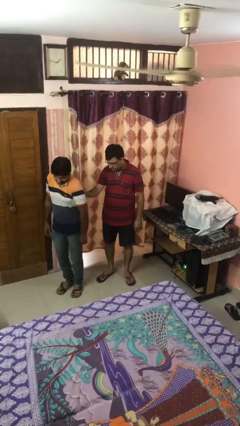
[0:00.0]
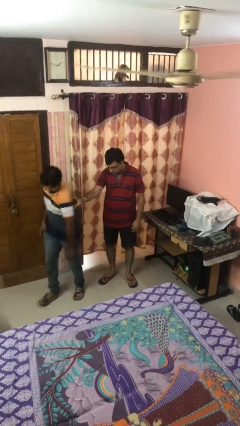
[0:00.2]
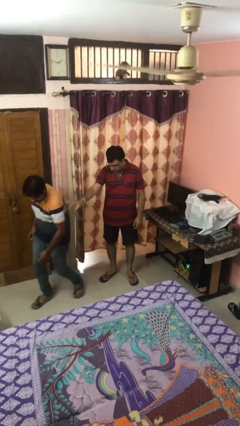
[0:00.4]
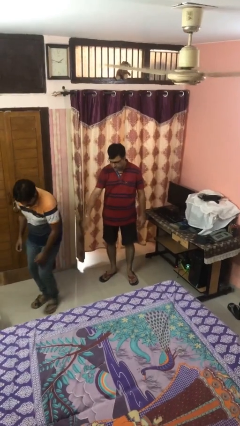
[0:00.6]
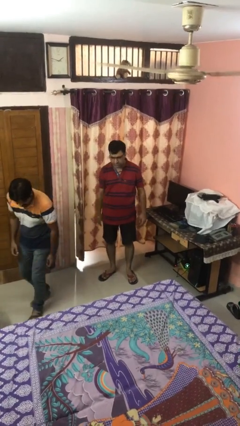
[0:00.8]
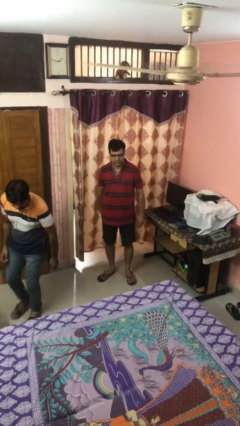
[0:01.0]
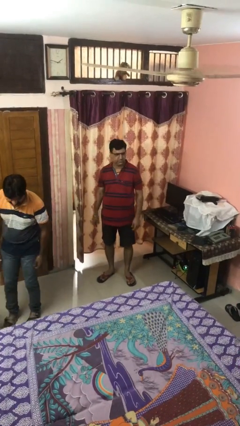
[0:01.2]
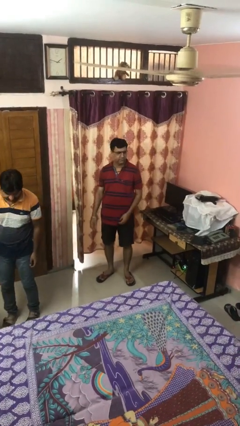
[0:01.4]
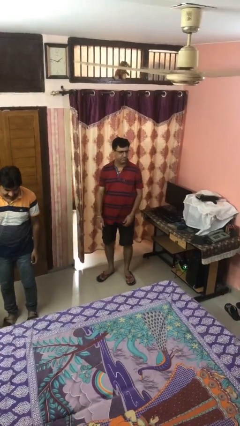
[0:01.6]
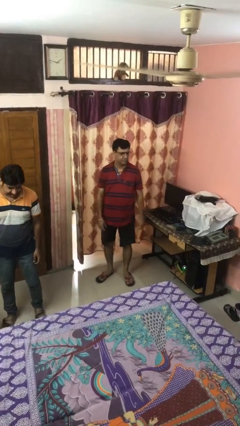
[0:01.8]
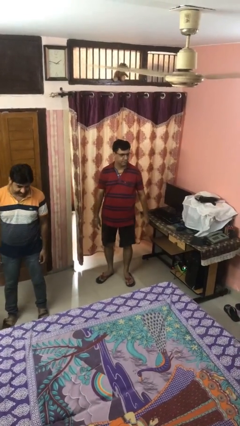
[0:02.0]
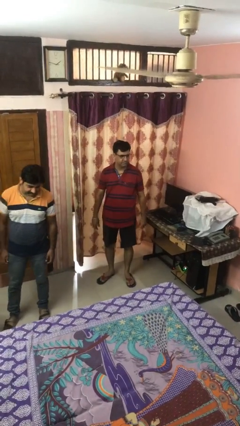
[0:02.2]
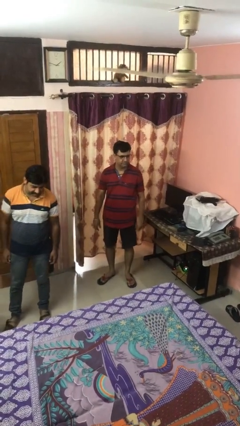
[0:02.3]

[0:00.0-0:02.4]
person shoves person

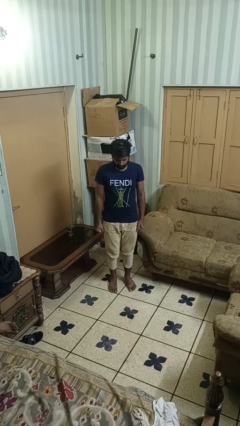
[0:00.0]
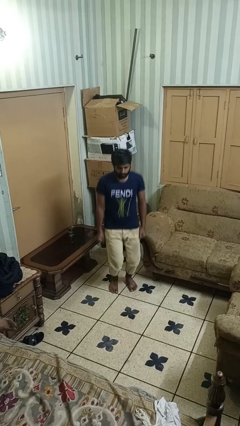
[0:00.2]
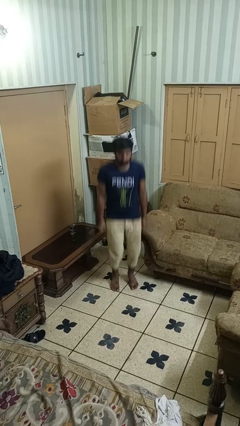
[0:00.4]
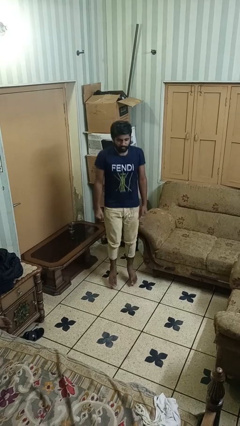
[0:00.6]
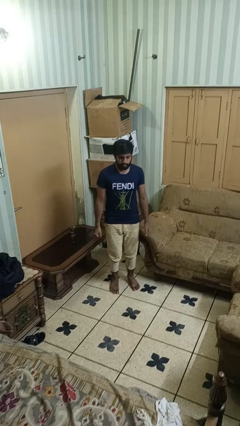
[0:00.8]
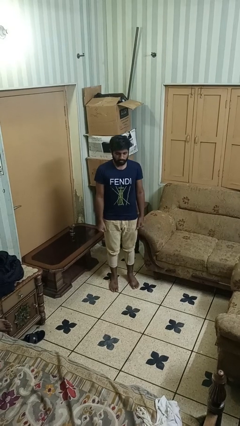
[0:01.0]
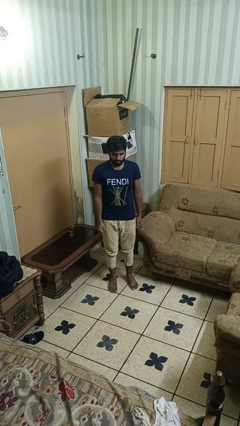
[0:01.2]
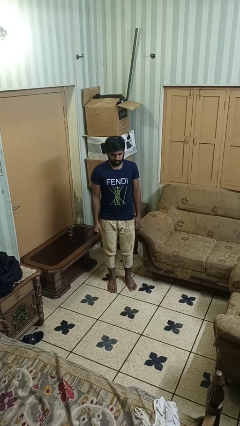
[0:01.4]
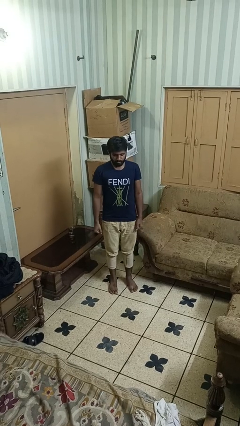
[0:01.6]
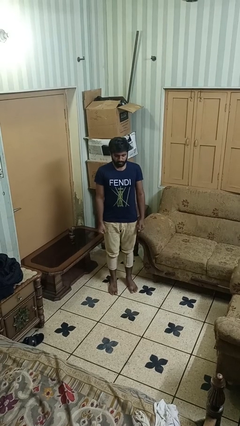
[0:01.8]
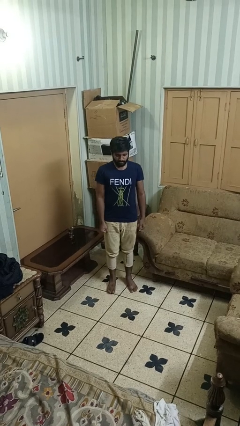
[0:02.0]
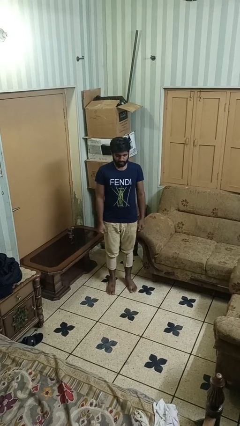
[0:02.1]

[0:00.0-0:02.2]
person jumps

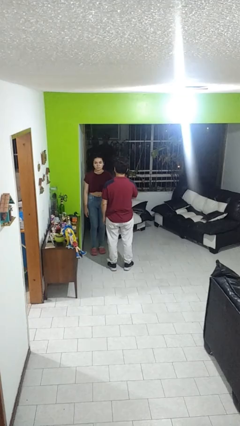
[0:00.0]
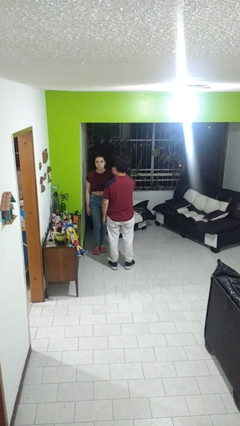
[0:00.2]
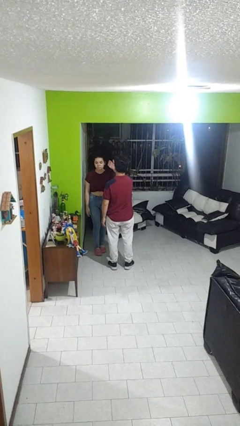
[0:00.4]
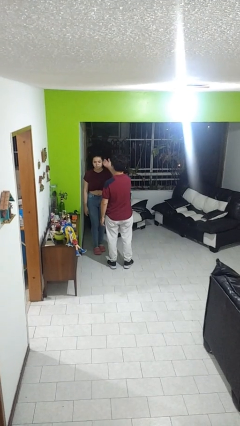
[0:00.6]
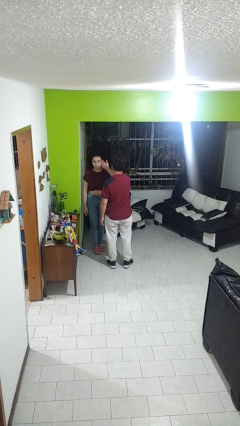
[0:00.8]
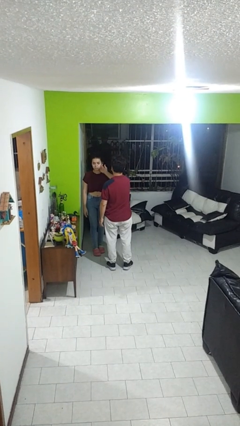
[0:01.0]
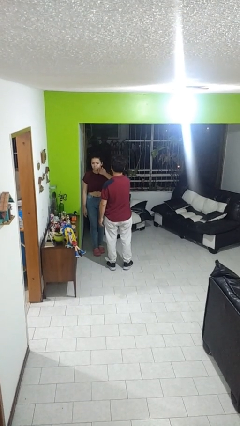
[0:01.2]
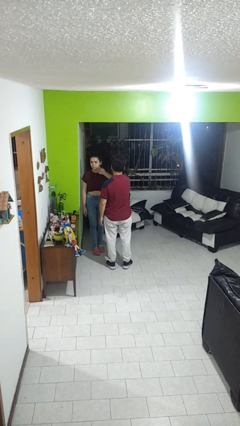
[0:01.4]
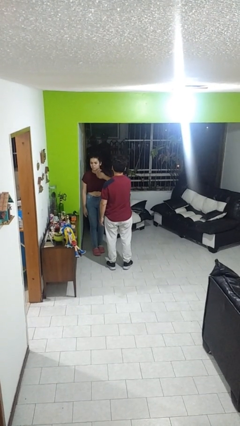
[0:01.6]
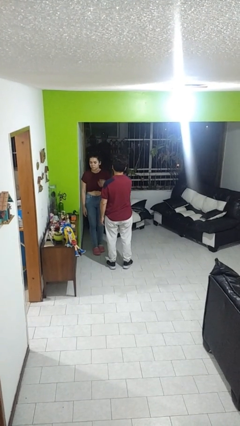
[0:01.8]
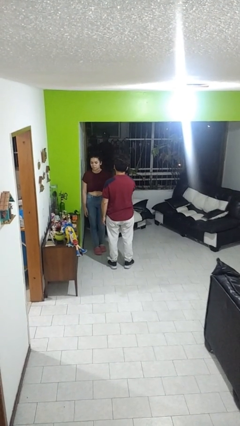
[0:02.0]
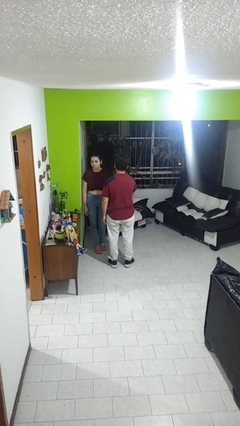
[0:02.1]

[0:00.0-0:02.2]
person touches face of person

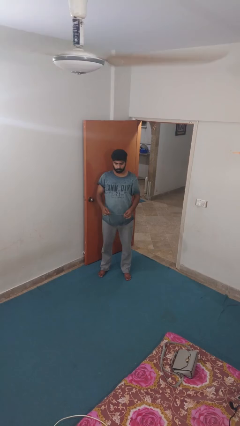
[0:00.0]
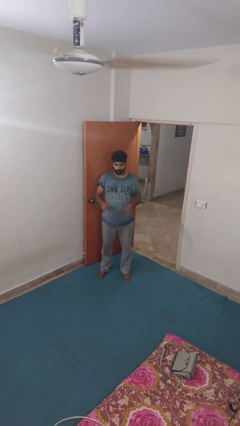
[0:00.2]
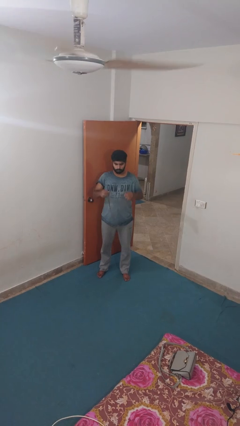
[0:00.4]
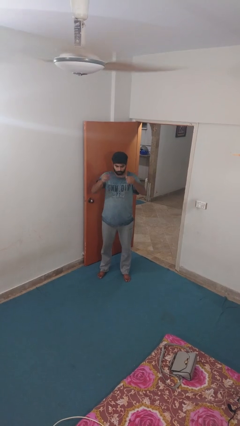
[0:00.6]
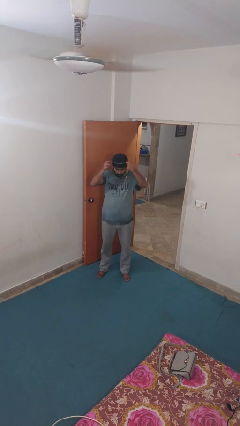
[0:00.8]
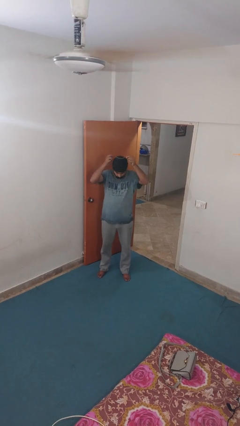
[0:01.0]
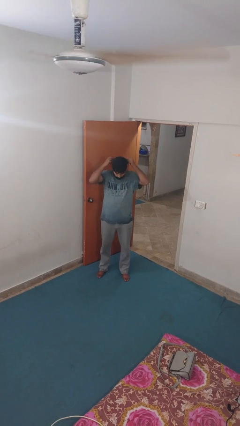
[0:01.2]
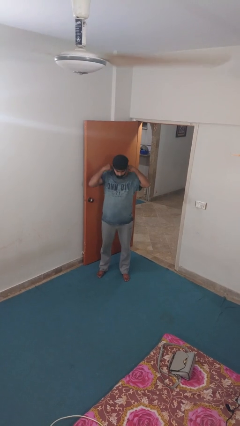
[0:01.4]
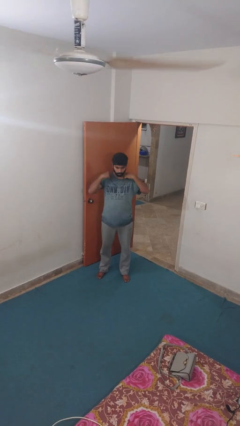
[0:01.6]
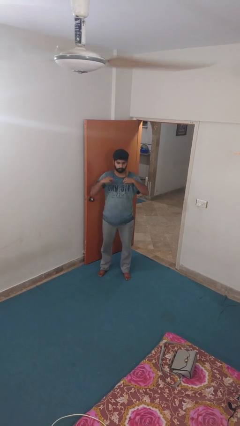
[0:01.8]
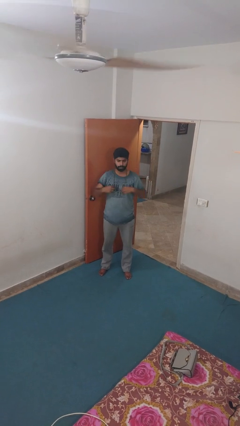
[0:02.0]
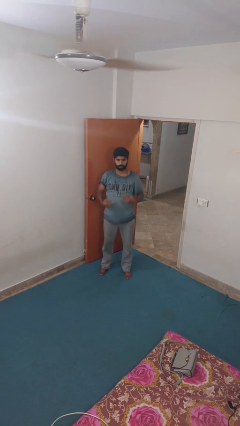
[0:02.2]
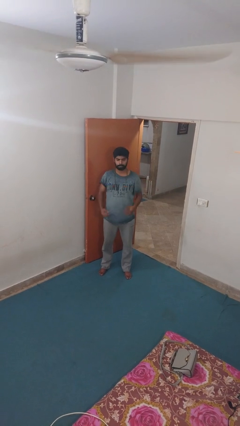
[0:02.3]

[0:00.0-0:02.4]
person puts on necklace

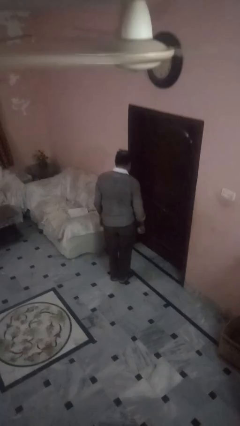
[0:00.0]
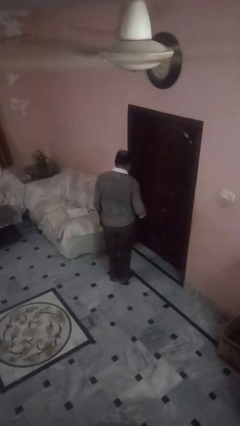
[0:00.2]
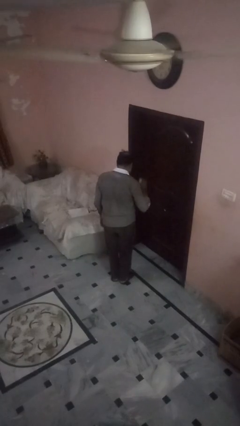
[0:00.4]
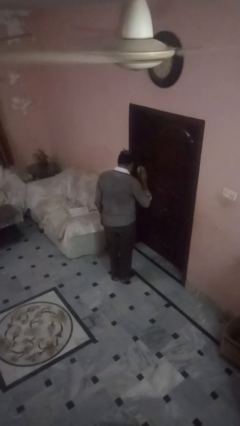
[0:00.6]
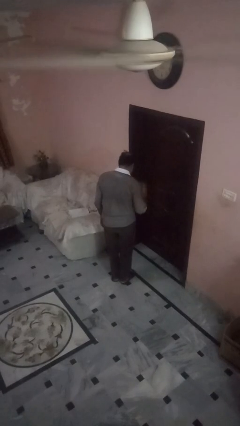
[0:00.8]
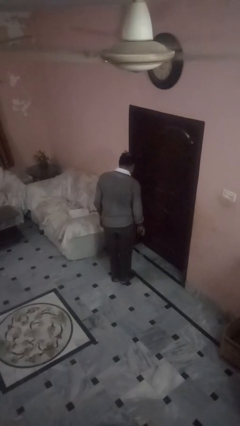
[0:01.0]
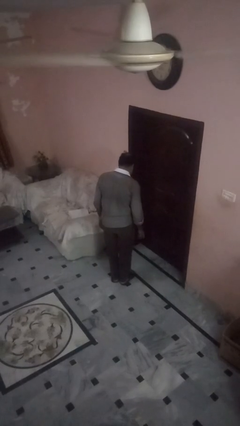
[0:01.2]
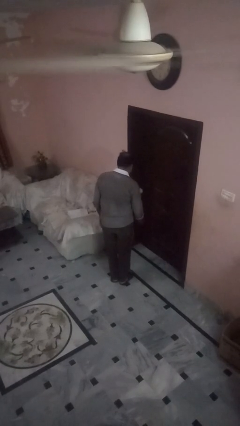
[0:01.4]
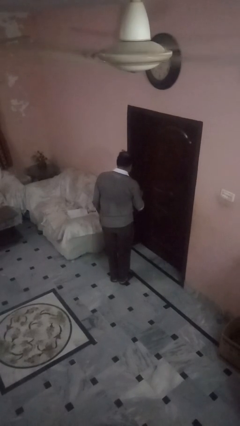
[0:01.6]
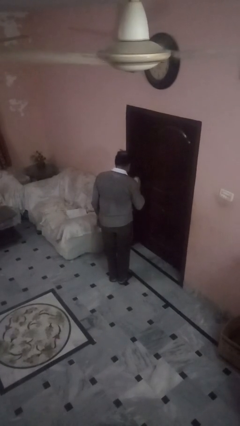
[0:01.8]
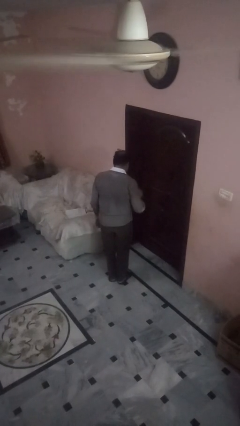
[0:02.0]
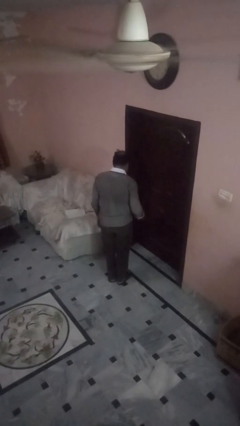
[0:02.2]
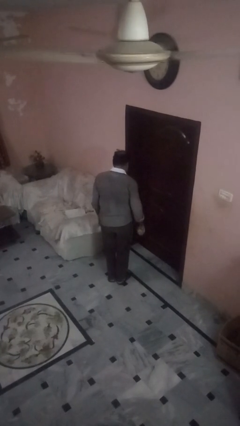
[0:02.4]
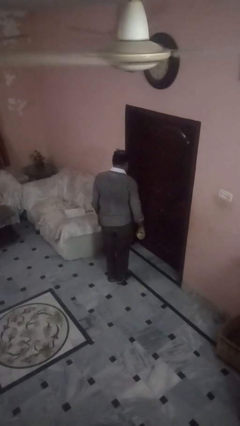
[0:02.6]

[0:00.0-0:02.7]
person bounces ball on floor

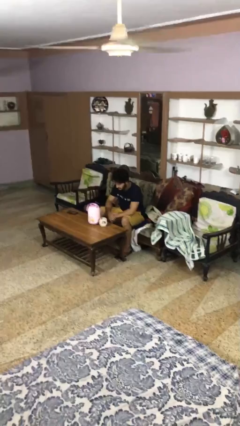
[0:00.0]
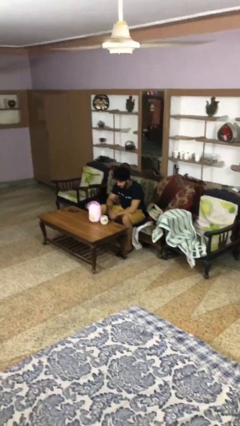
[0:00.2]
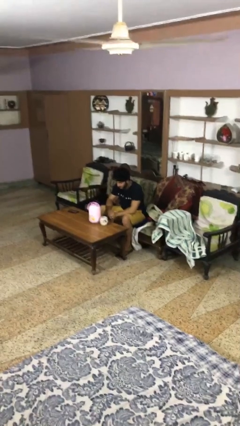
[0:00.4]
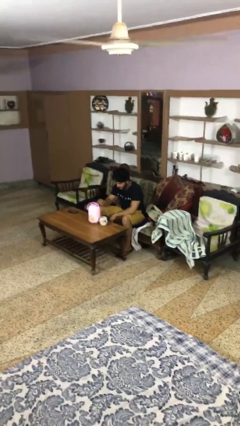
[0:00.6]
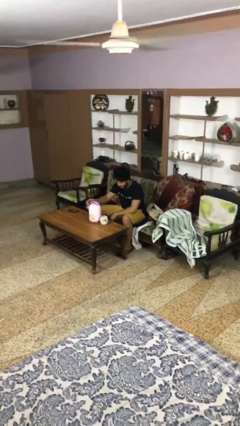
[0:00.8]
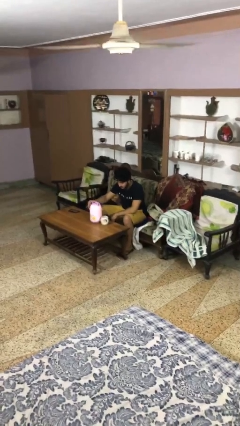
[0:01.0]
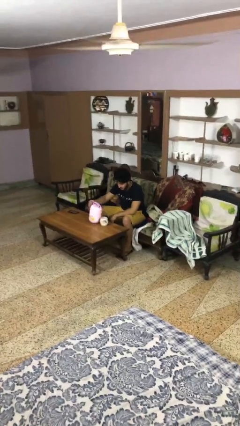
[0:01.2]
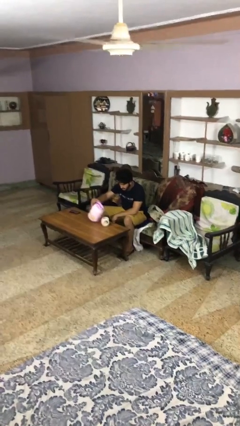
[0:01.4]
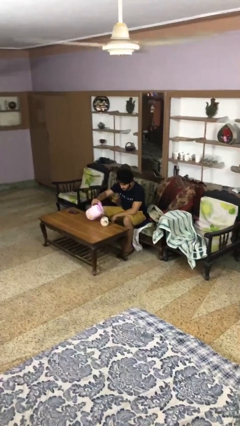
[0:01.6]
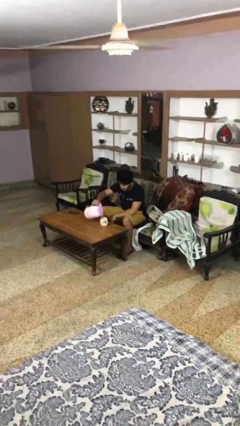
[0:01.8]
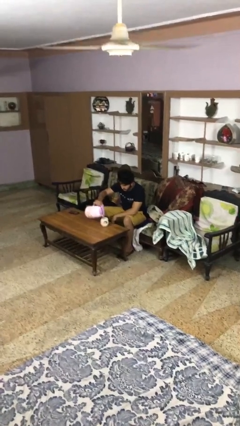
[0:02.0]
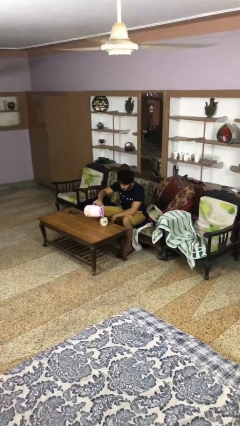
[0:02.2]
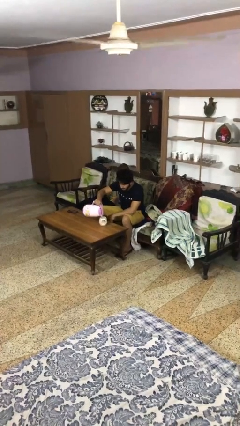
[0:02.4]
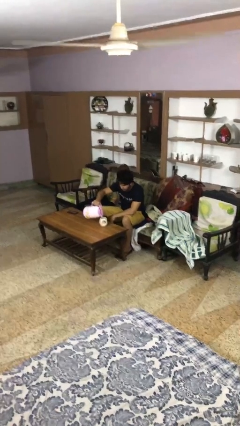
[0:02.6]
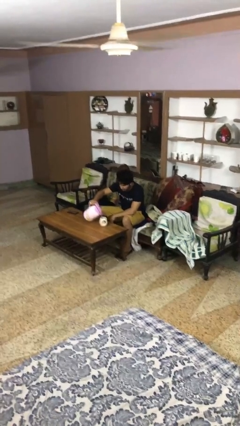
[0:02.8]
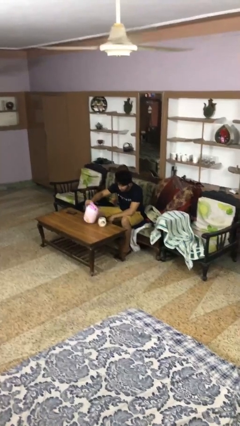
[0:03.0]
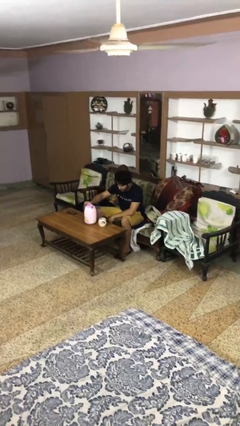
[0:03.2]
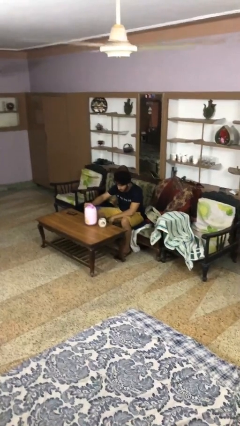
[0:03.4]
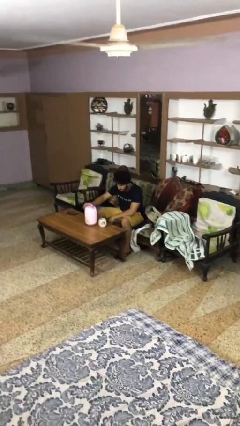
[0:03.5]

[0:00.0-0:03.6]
person pours coffee into mug

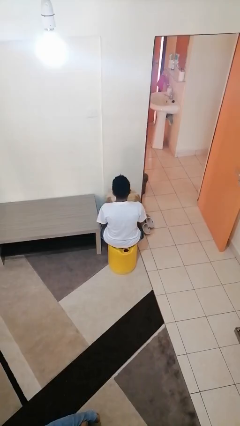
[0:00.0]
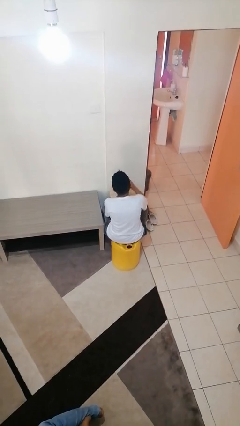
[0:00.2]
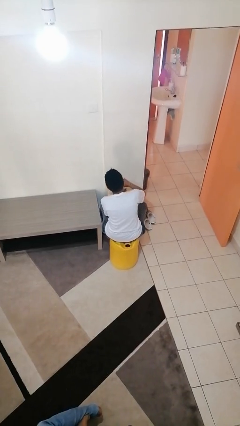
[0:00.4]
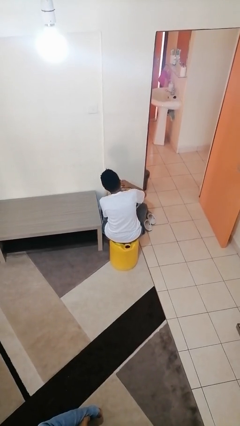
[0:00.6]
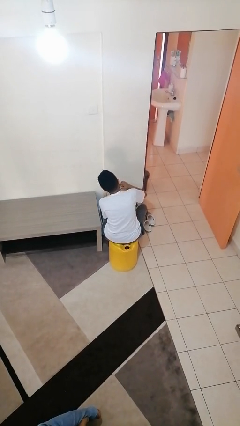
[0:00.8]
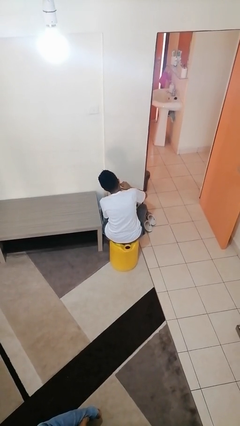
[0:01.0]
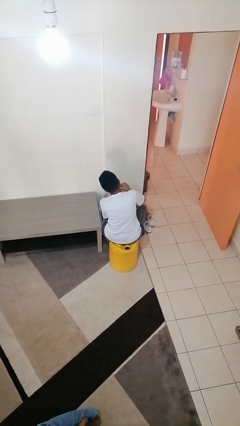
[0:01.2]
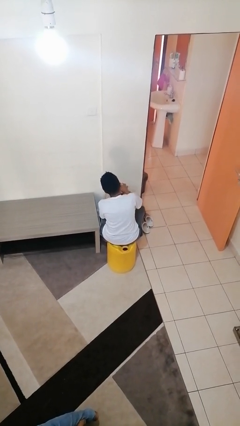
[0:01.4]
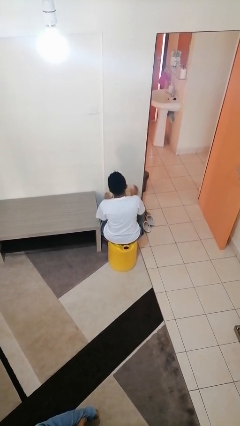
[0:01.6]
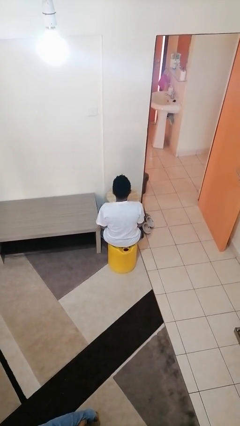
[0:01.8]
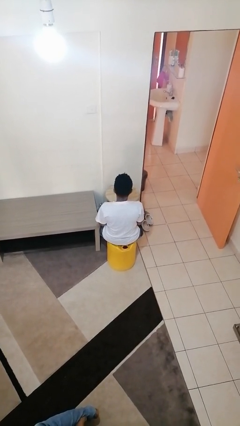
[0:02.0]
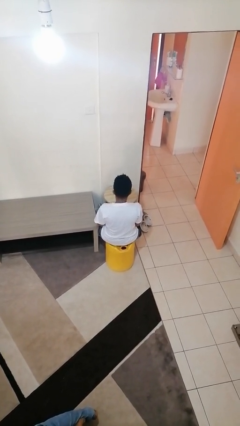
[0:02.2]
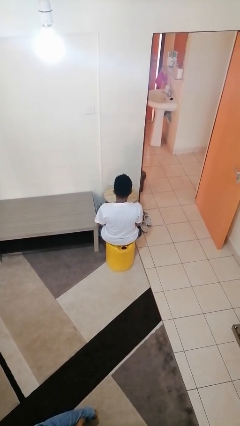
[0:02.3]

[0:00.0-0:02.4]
person closes jar
